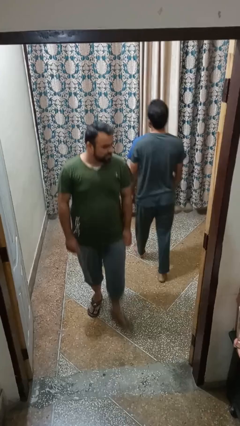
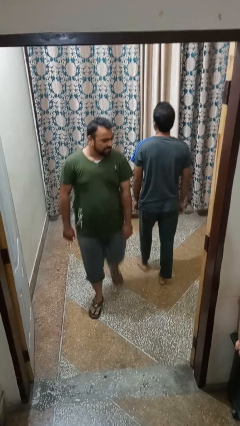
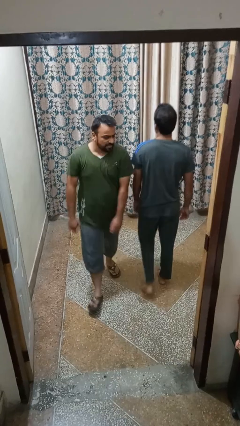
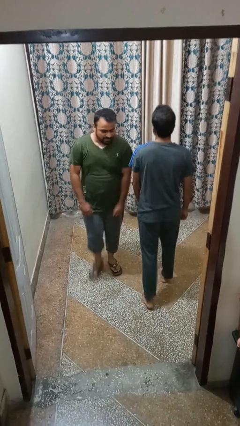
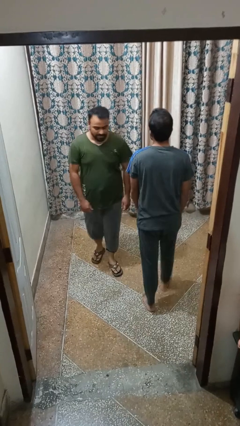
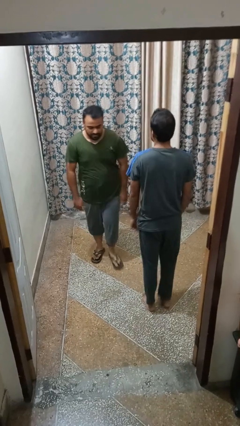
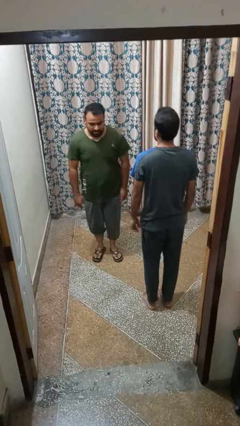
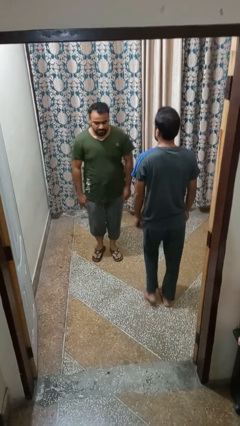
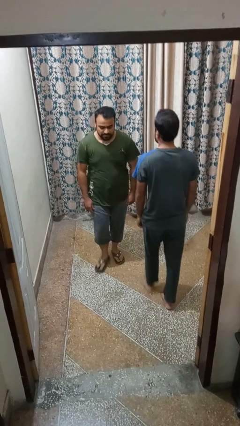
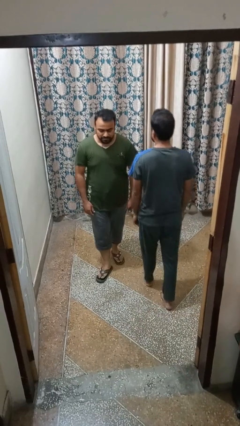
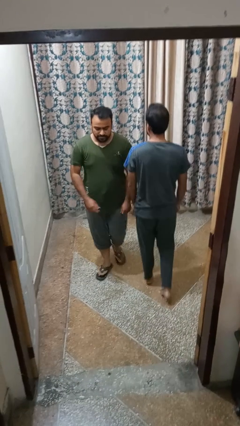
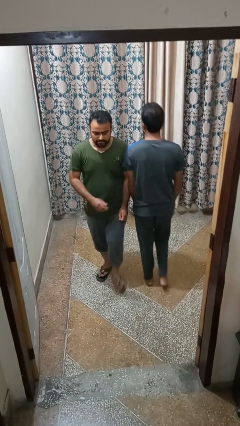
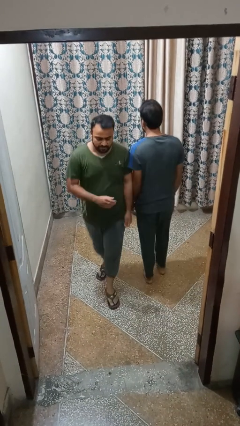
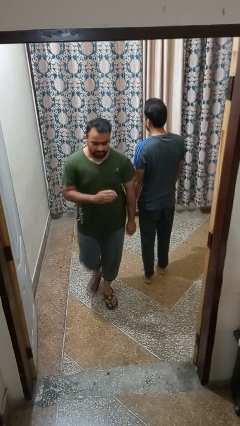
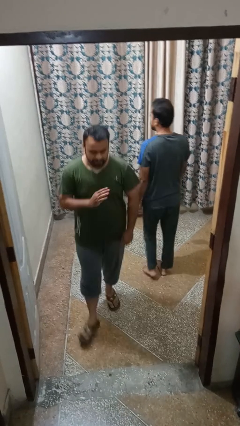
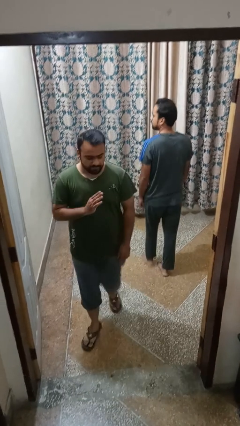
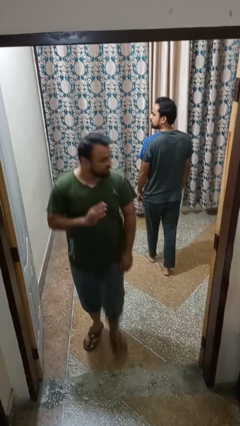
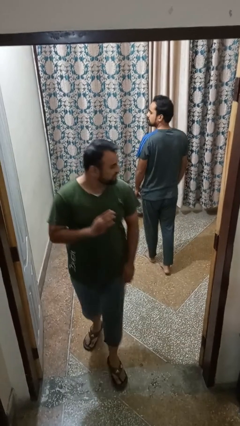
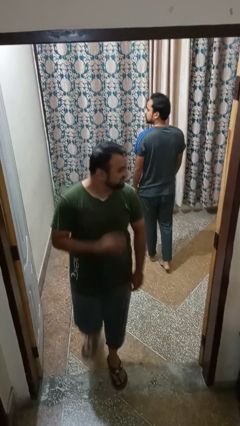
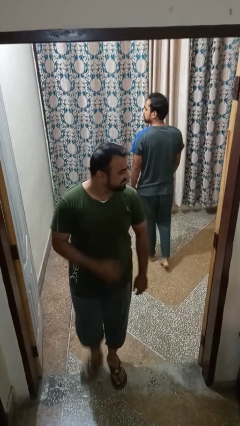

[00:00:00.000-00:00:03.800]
person bumps into person

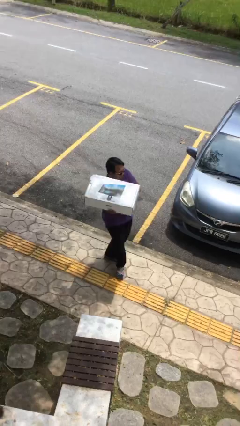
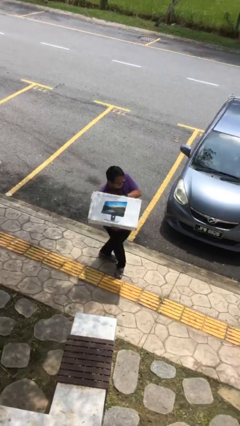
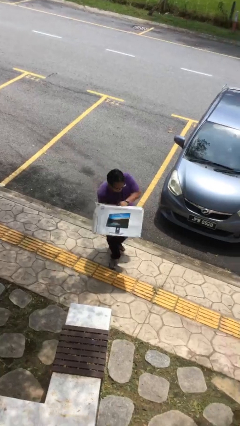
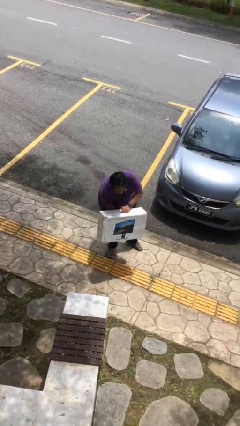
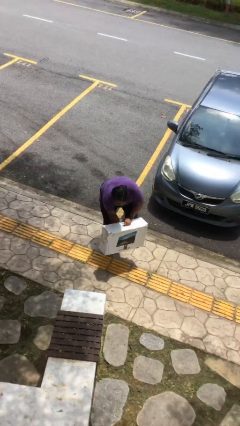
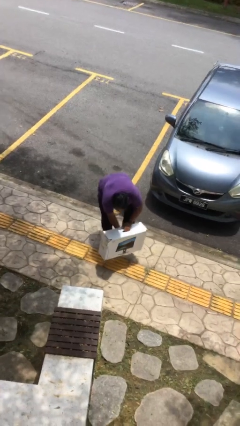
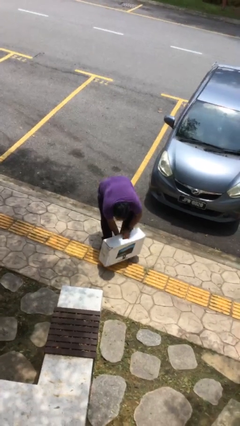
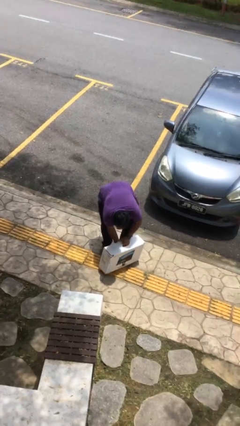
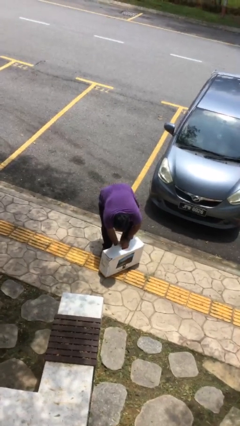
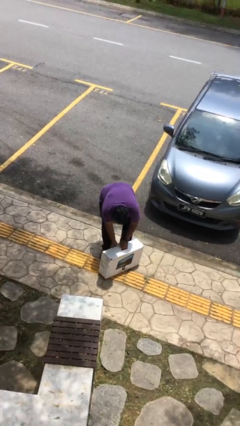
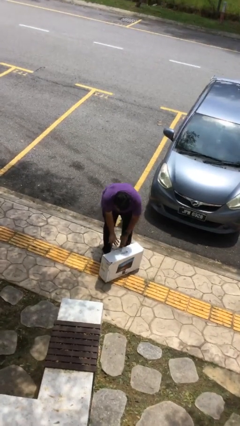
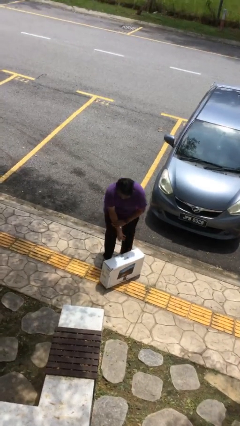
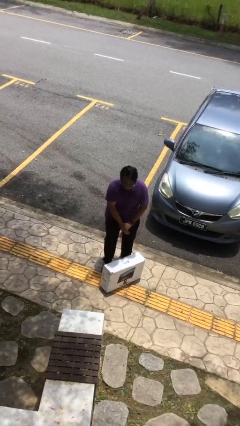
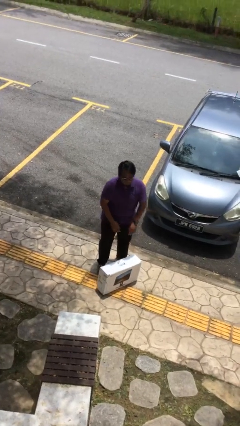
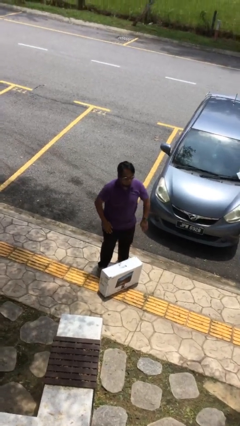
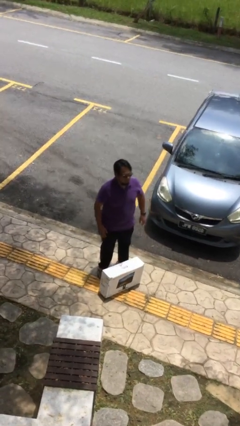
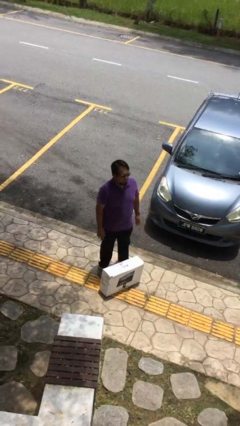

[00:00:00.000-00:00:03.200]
person puts down object on floor

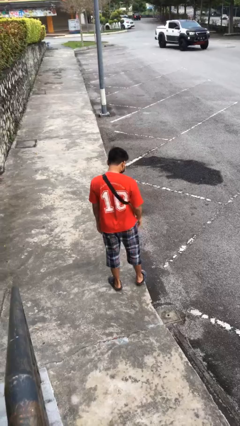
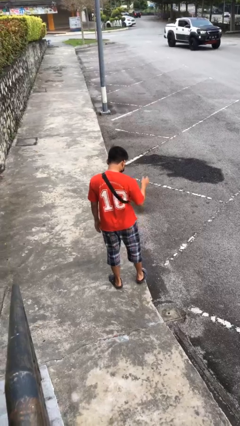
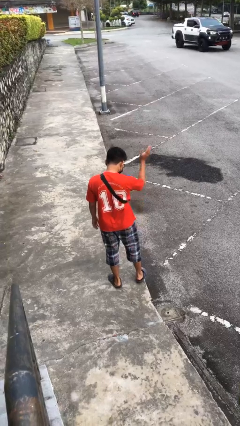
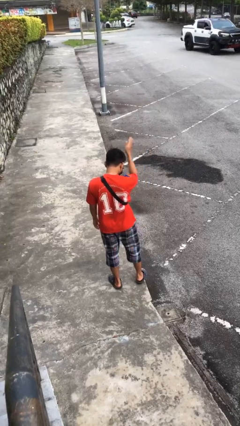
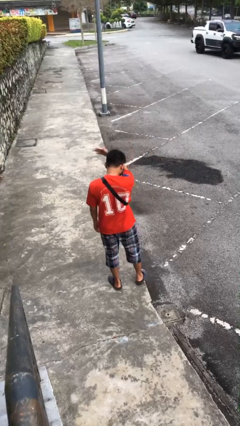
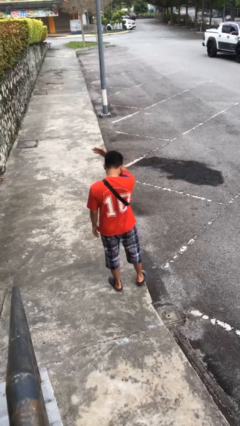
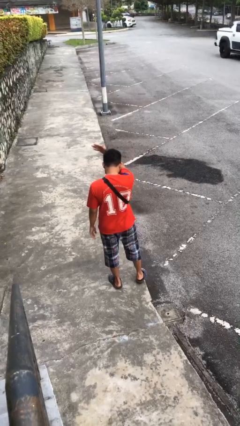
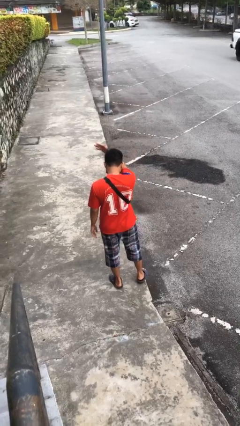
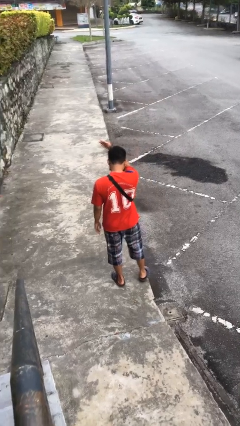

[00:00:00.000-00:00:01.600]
person gestures swipe left

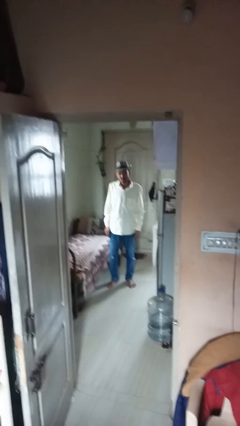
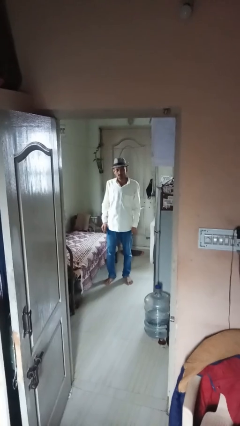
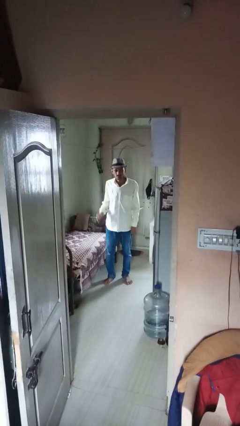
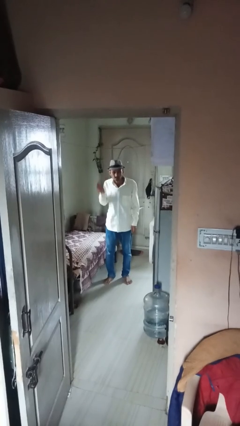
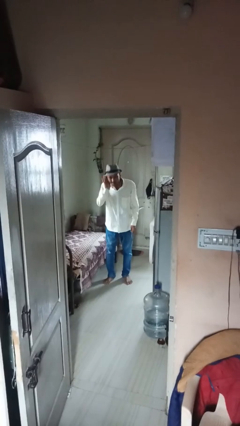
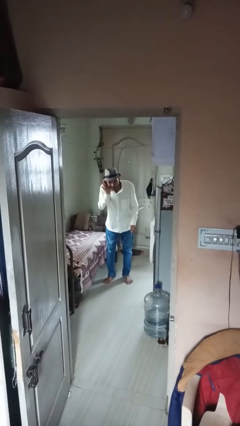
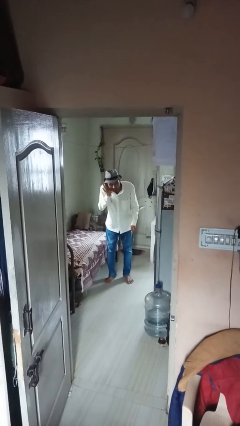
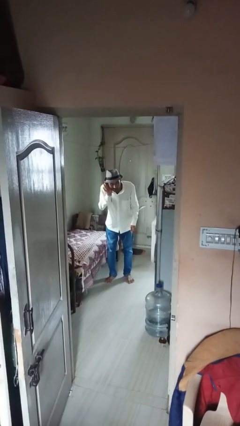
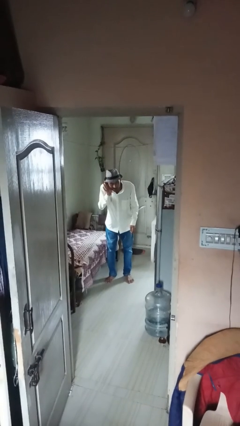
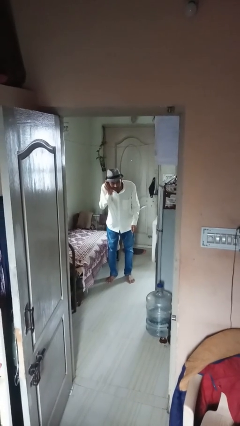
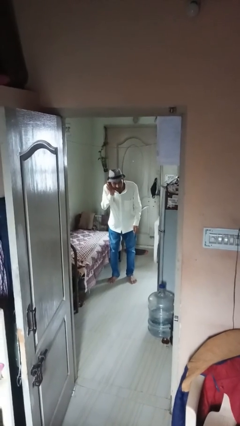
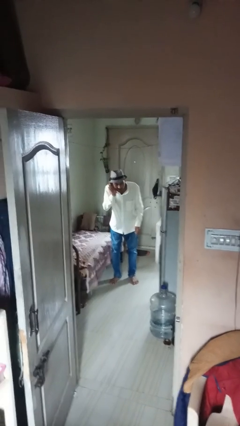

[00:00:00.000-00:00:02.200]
person gestures listen closely

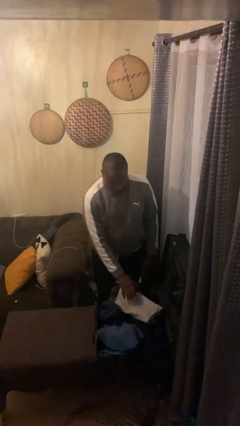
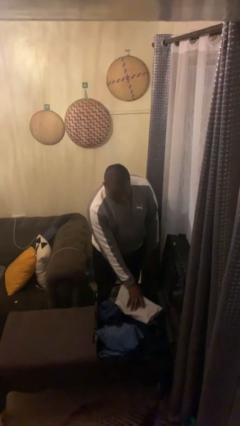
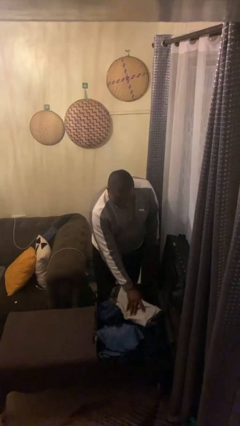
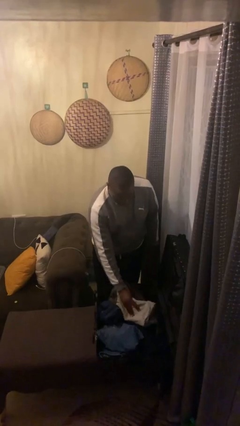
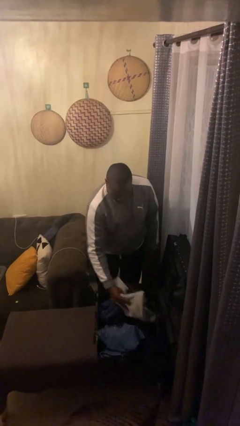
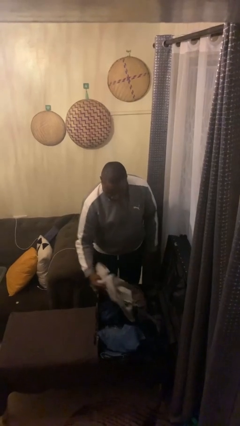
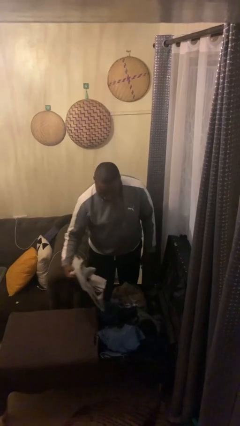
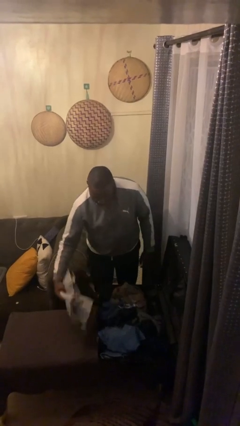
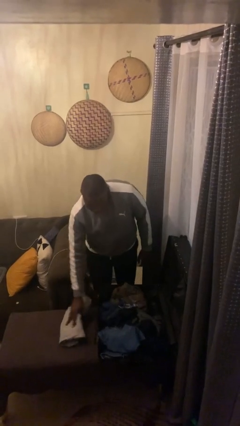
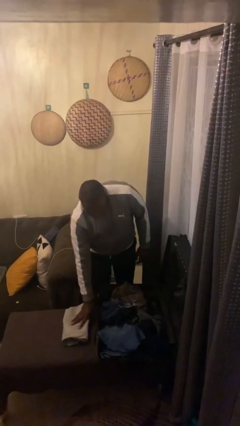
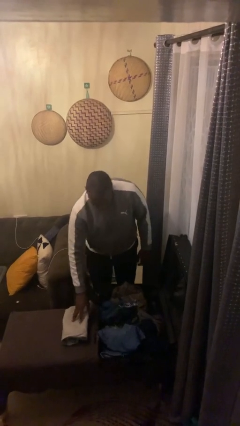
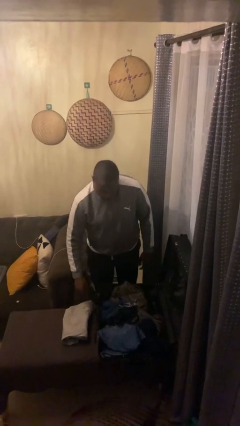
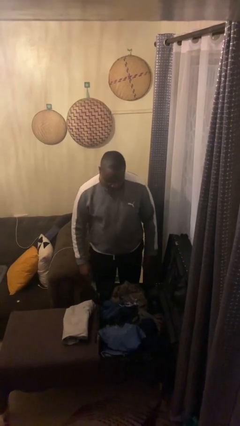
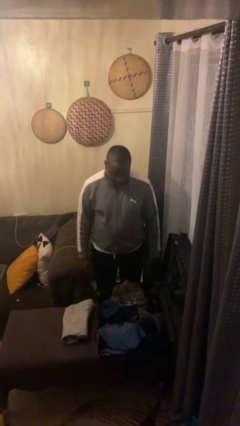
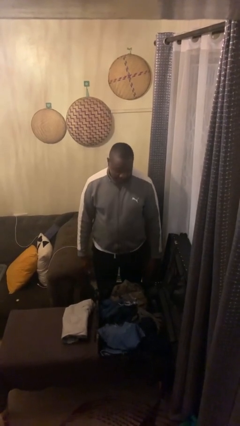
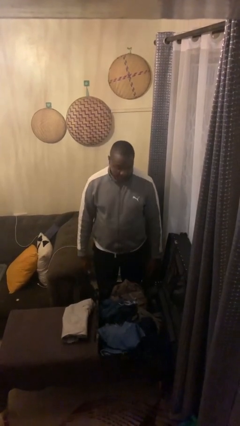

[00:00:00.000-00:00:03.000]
person unloads clothes from suitcase

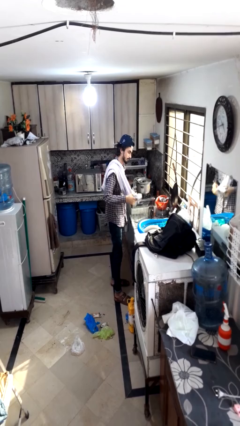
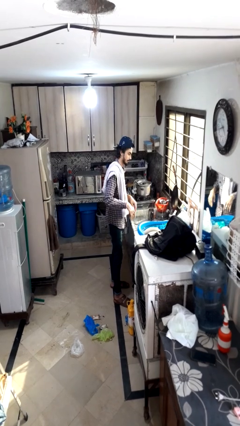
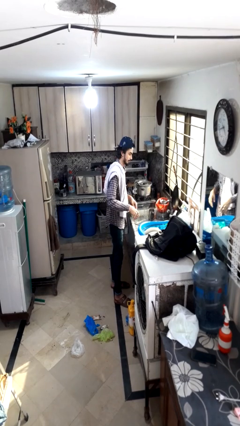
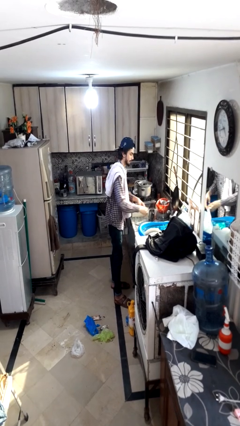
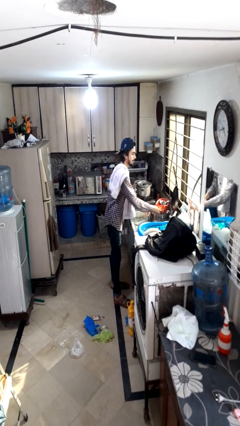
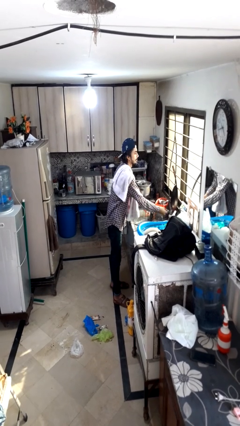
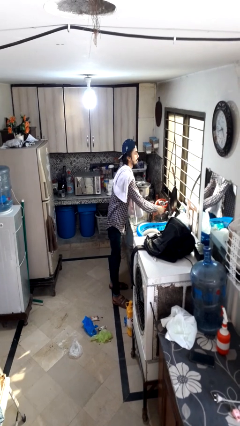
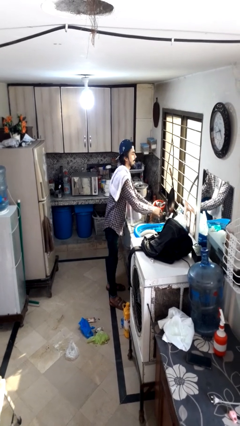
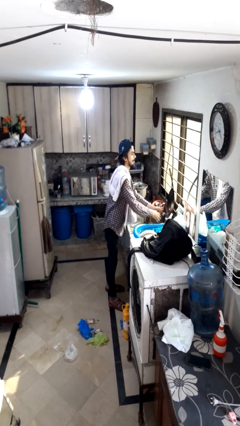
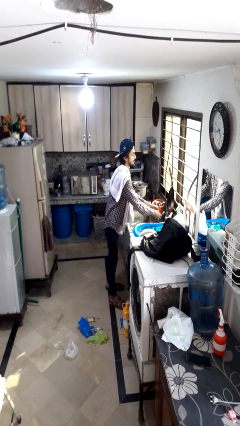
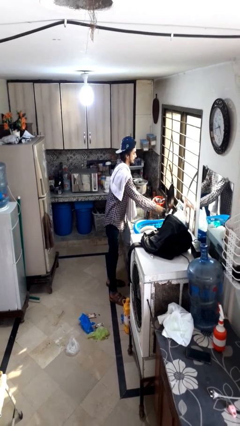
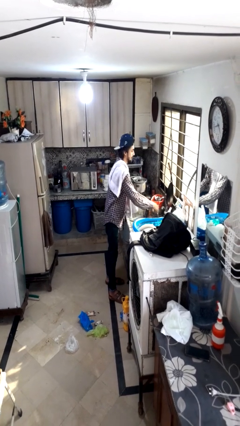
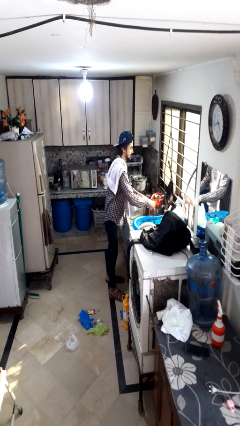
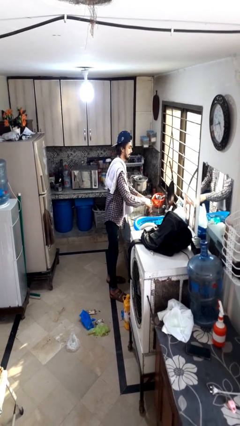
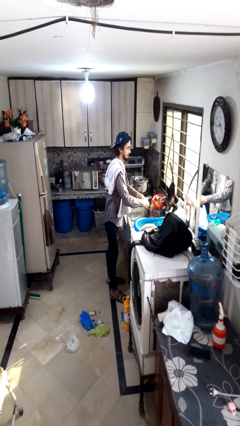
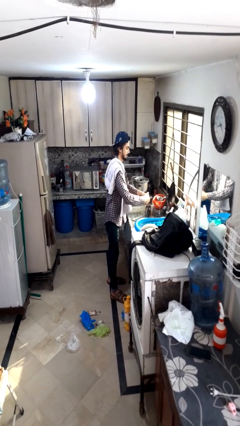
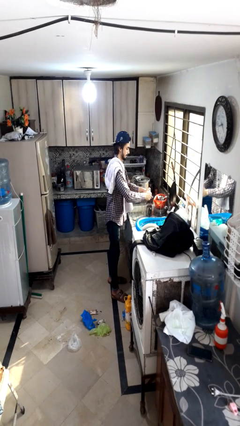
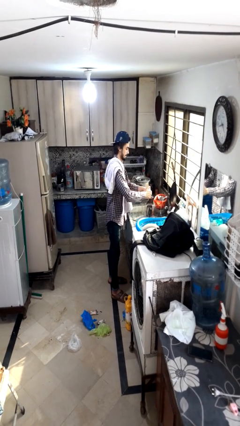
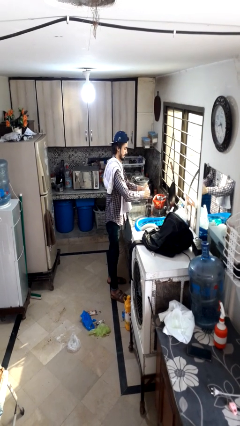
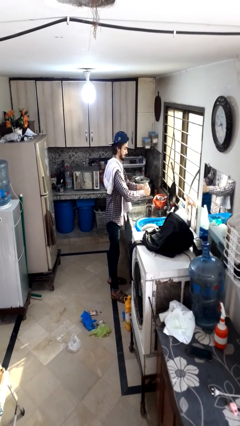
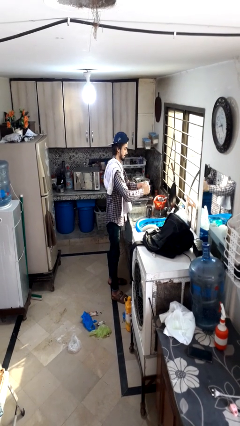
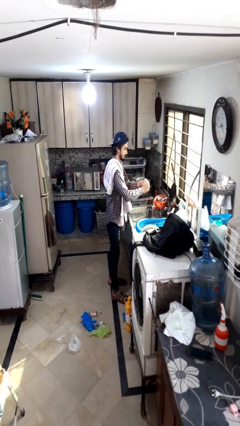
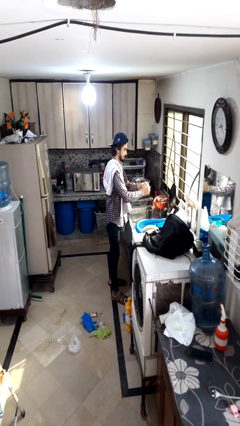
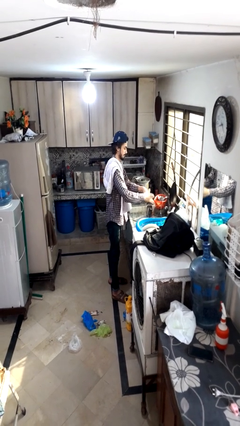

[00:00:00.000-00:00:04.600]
person washes hands
